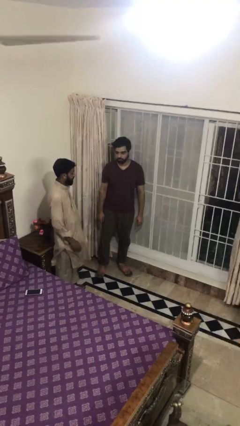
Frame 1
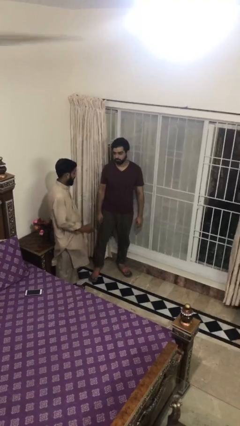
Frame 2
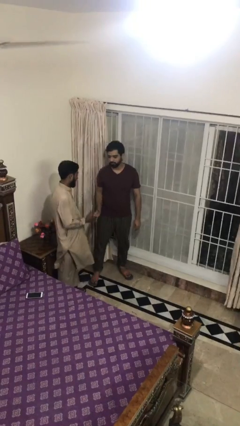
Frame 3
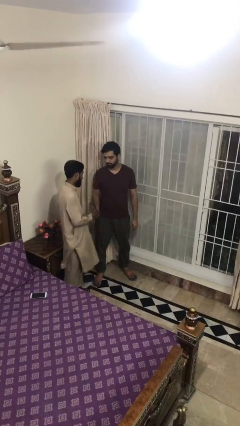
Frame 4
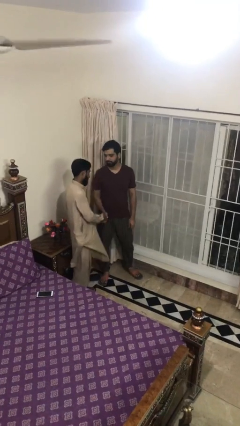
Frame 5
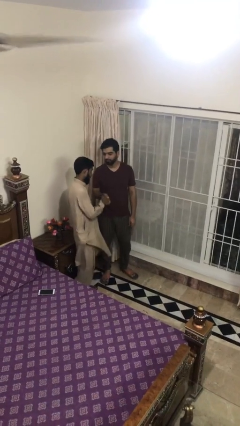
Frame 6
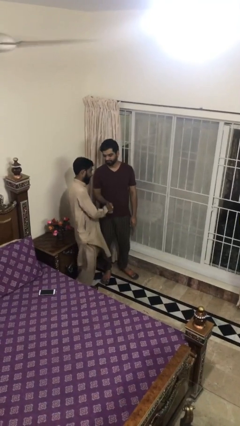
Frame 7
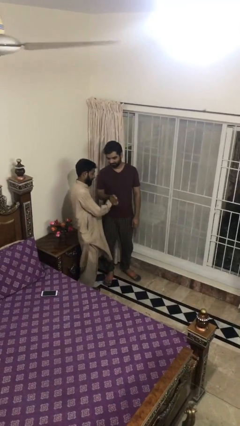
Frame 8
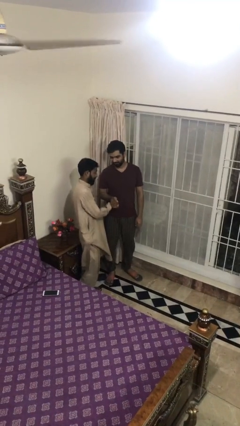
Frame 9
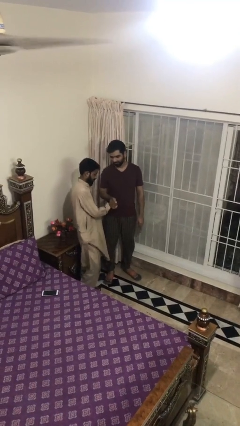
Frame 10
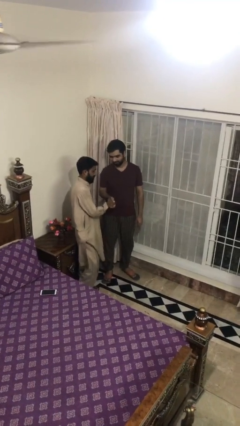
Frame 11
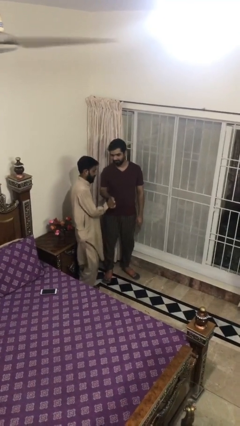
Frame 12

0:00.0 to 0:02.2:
person shakes hand

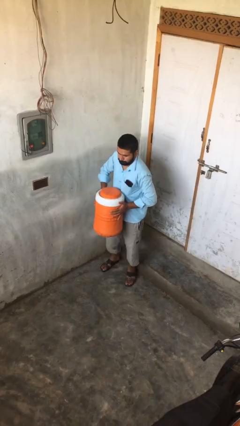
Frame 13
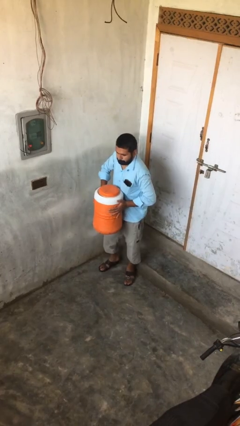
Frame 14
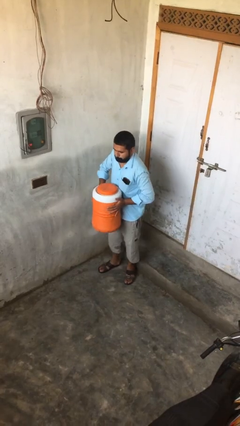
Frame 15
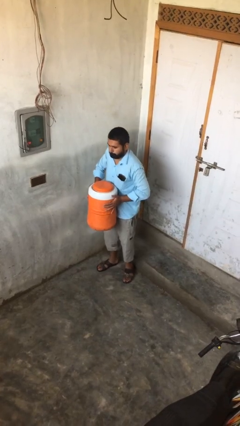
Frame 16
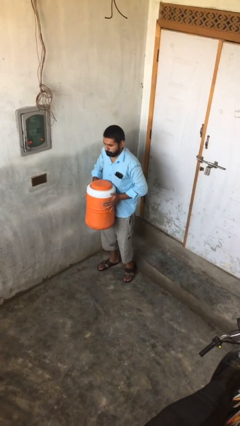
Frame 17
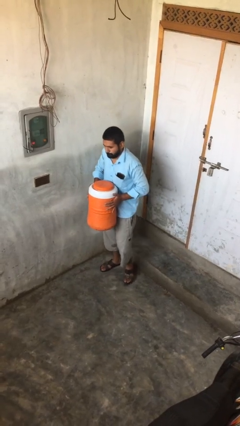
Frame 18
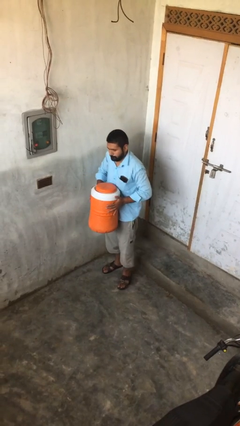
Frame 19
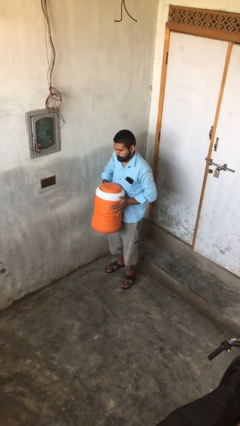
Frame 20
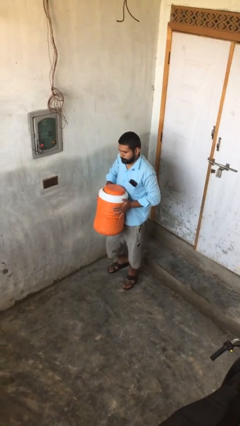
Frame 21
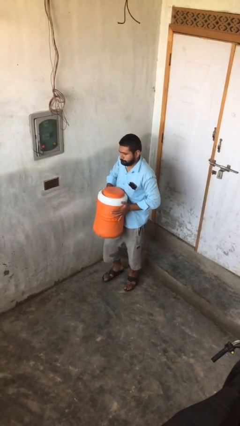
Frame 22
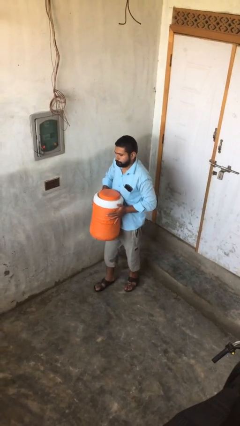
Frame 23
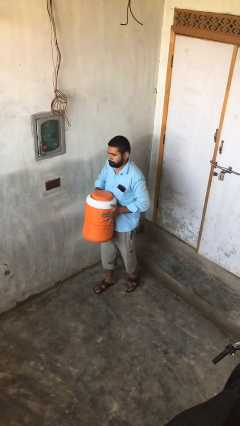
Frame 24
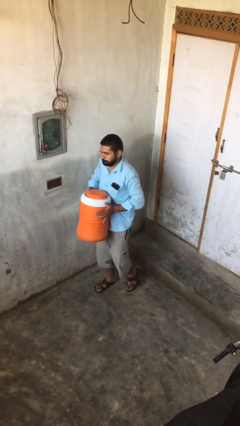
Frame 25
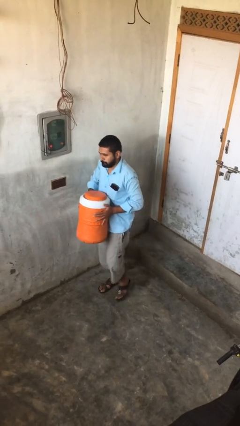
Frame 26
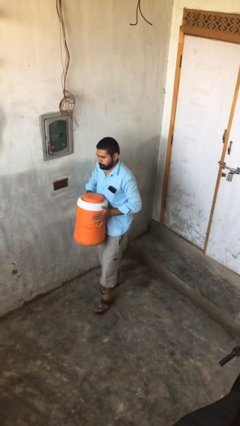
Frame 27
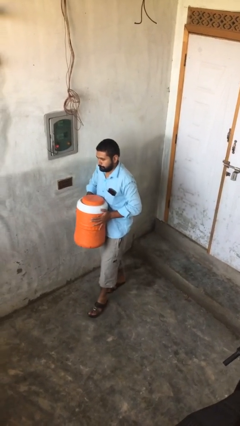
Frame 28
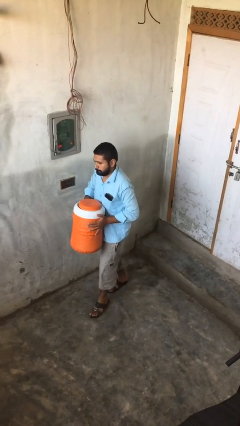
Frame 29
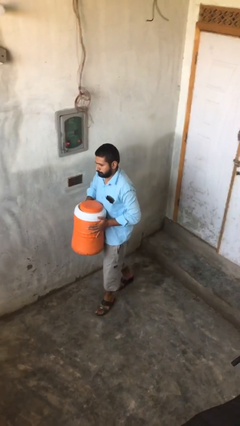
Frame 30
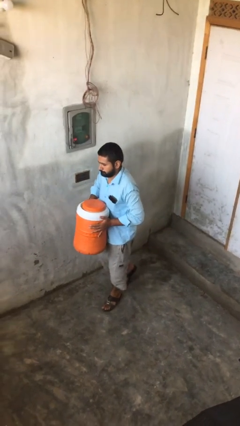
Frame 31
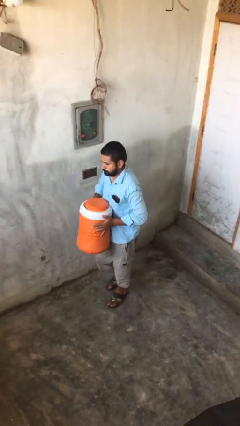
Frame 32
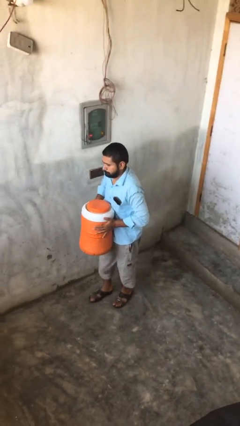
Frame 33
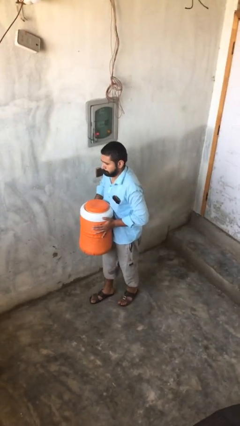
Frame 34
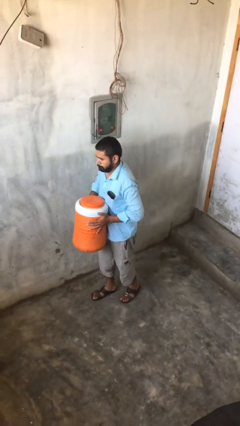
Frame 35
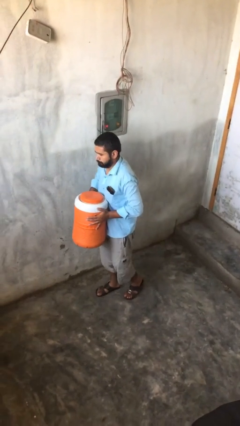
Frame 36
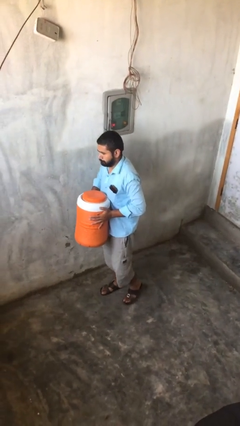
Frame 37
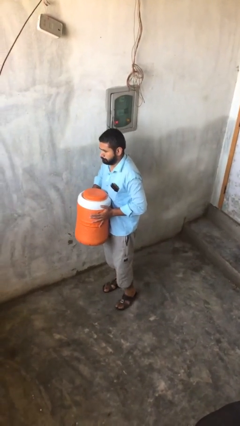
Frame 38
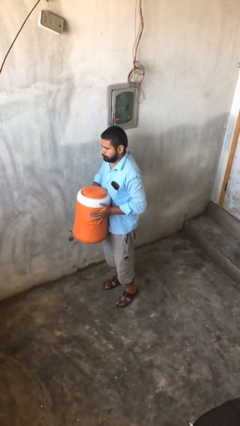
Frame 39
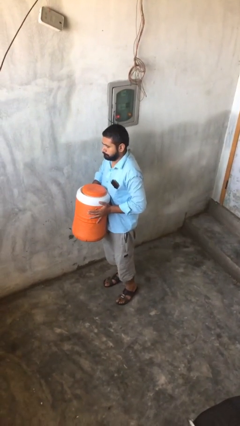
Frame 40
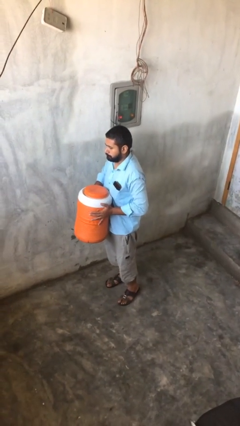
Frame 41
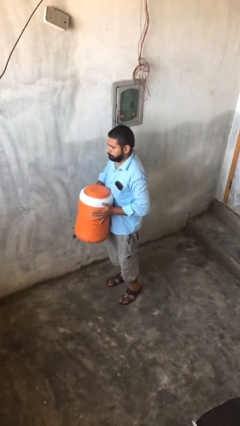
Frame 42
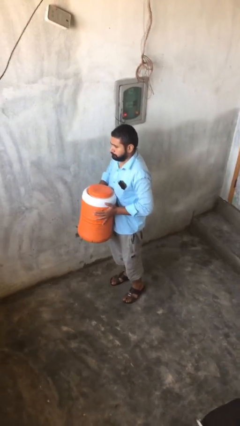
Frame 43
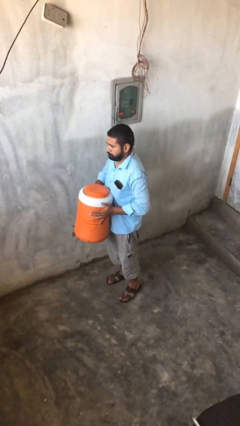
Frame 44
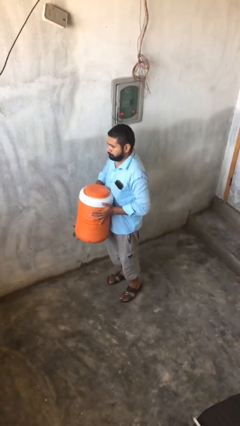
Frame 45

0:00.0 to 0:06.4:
person carries heavy object

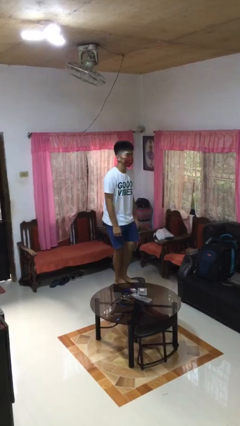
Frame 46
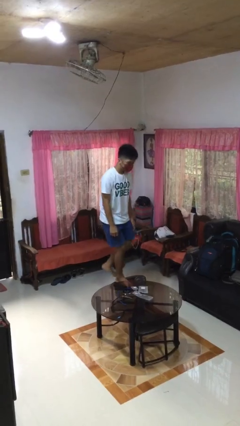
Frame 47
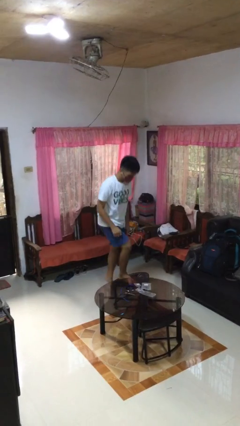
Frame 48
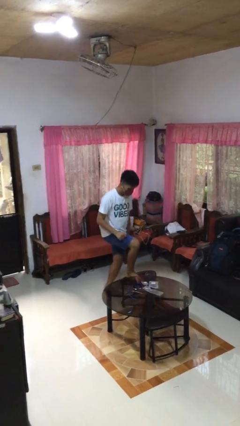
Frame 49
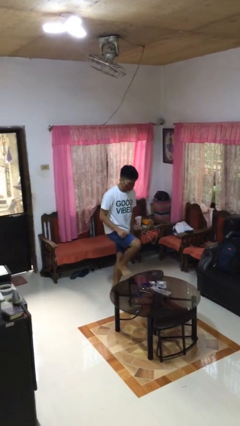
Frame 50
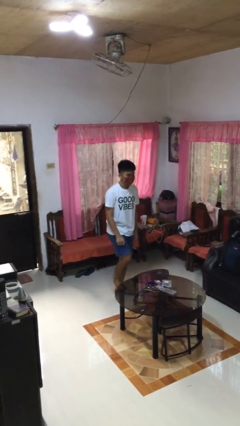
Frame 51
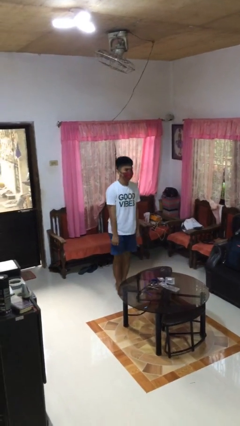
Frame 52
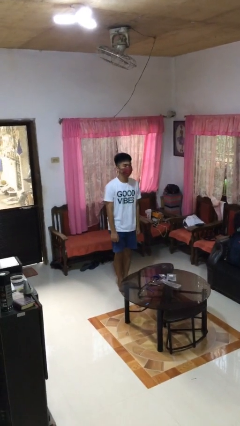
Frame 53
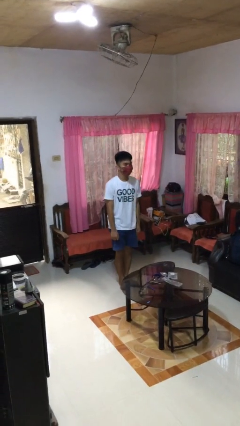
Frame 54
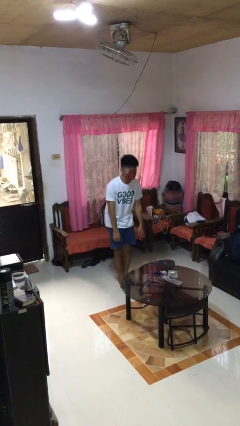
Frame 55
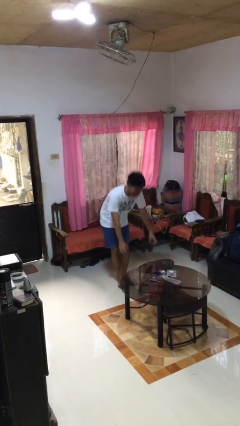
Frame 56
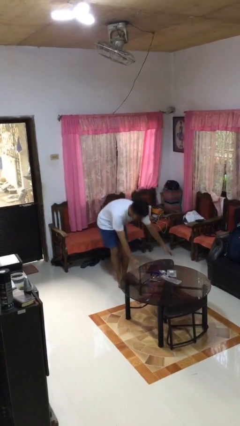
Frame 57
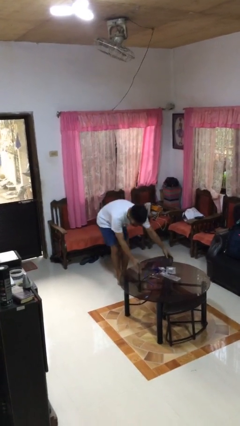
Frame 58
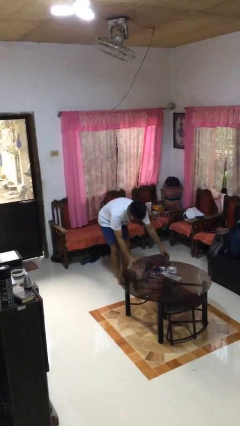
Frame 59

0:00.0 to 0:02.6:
person climbs off chair

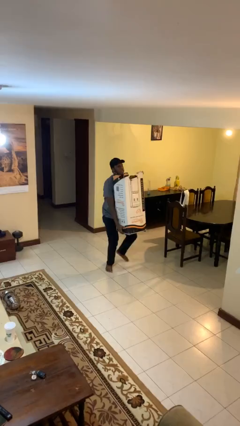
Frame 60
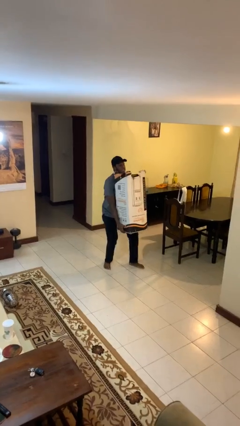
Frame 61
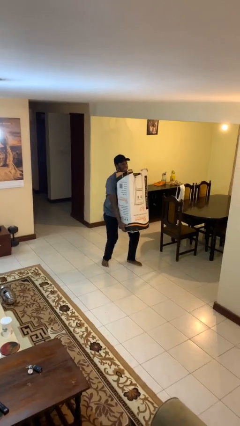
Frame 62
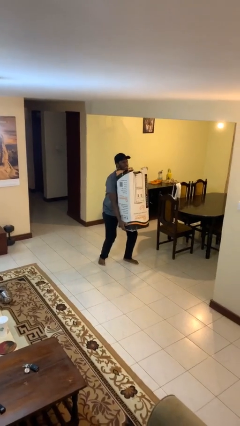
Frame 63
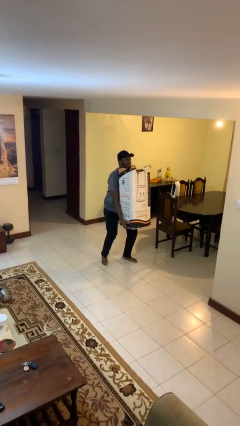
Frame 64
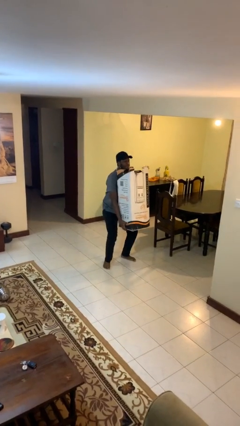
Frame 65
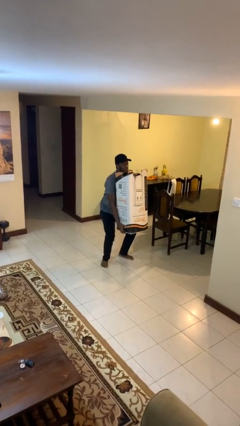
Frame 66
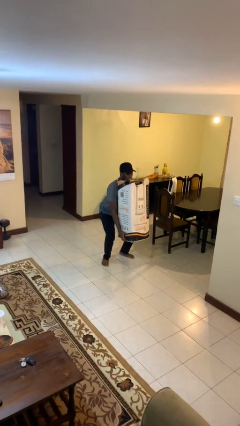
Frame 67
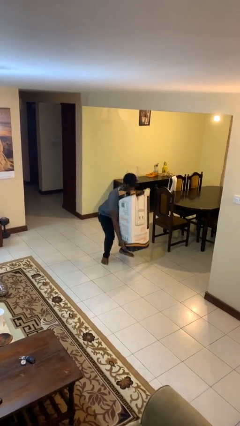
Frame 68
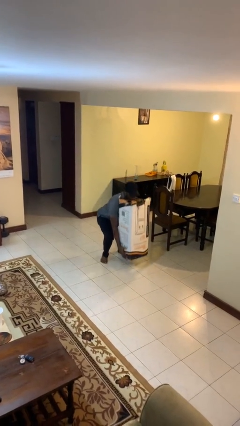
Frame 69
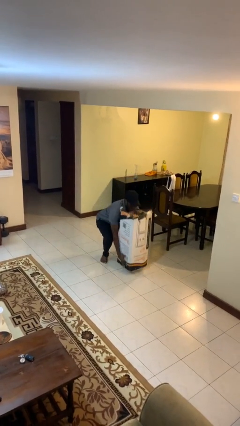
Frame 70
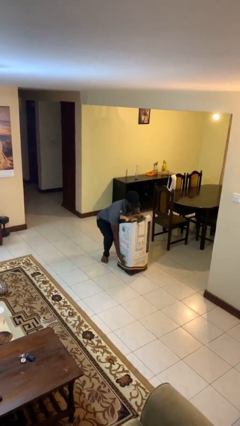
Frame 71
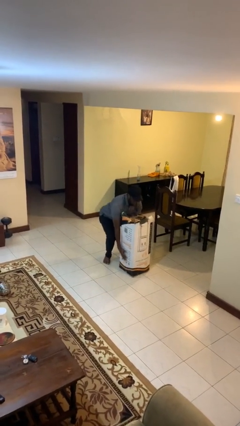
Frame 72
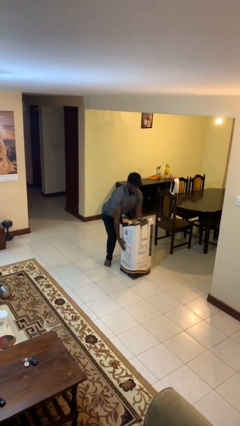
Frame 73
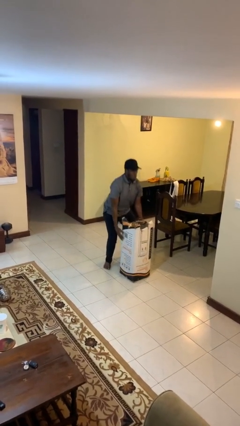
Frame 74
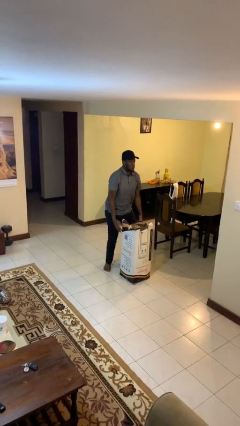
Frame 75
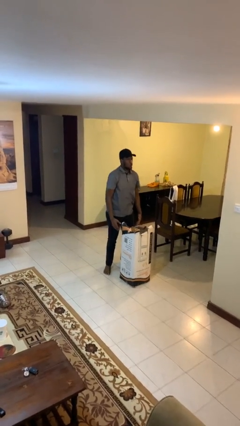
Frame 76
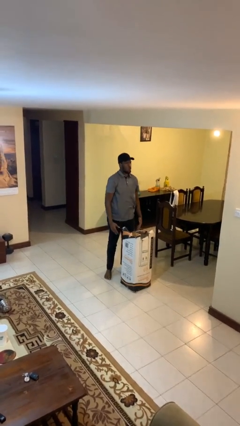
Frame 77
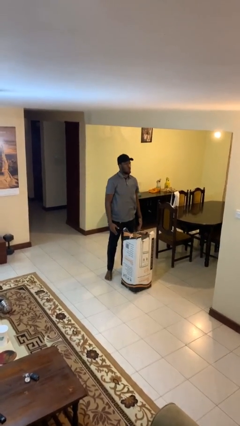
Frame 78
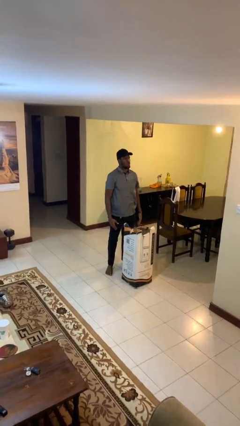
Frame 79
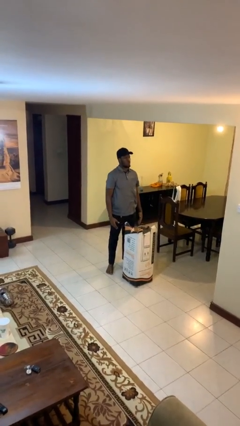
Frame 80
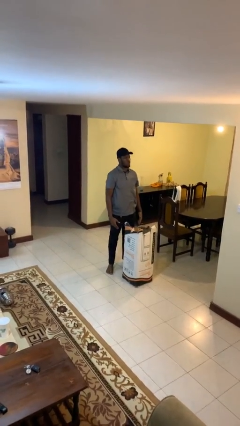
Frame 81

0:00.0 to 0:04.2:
person puts down object on floor

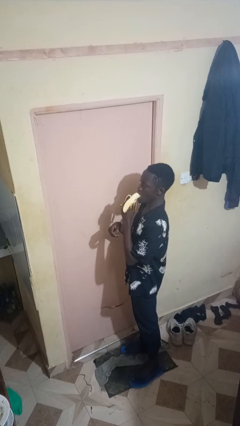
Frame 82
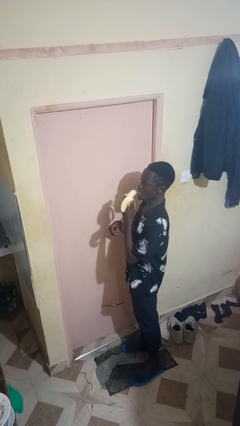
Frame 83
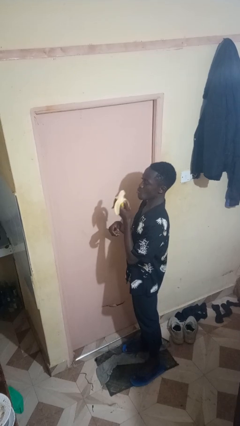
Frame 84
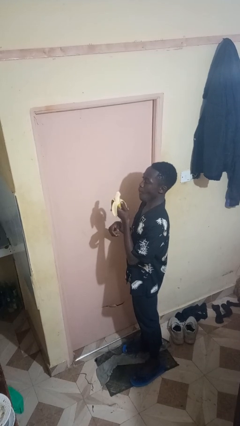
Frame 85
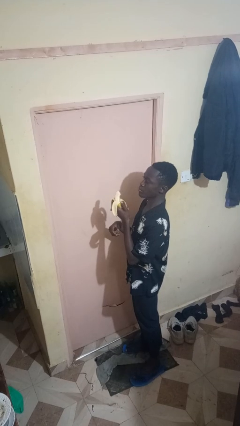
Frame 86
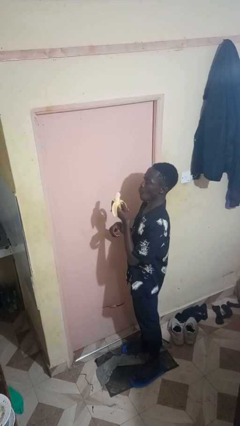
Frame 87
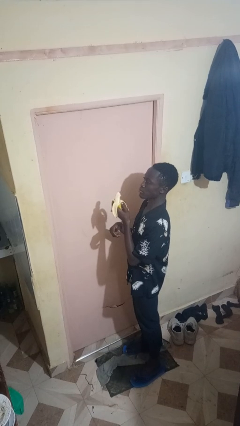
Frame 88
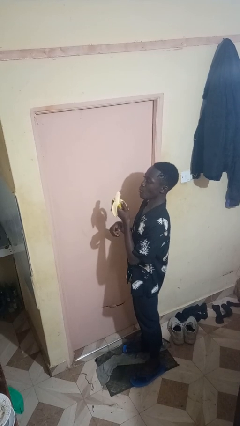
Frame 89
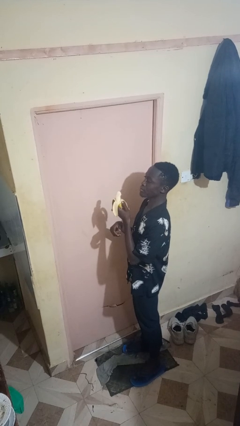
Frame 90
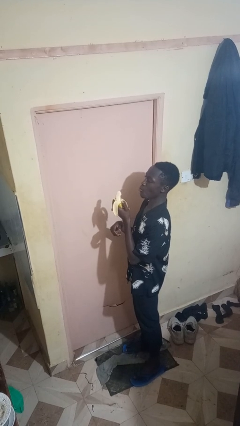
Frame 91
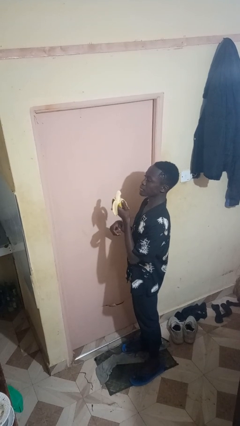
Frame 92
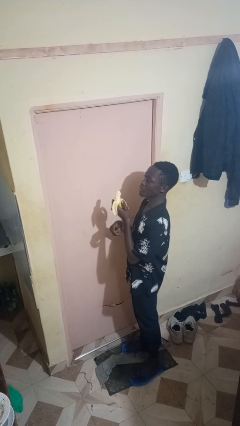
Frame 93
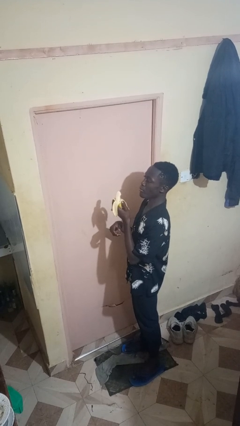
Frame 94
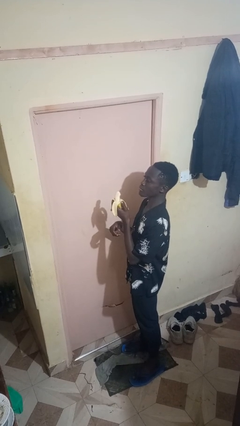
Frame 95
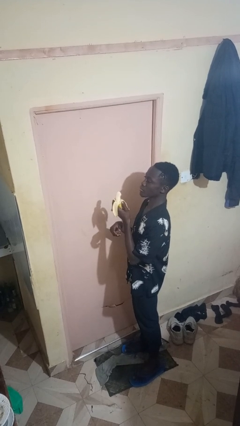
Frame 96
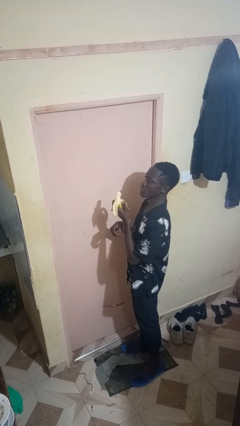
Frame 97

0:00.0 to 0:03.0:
person eats banana
